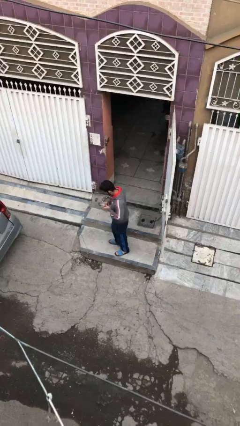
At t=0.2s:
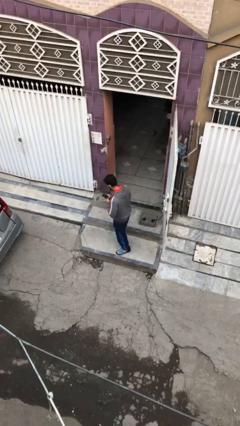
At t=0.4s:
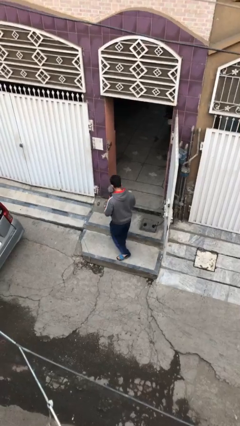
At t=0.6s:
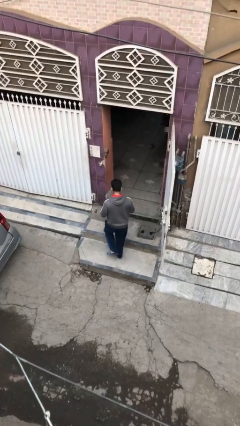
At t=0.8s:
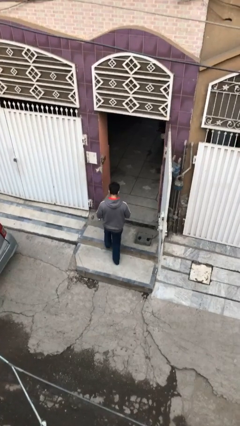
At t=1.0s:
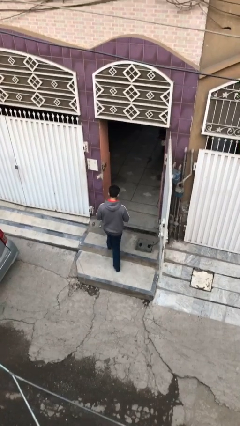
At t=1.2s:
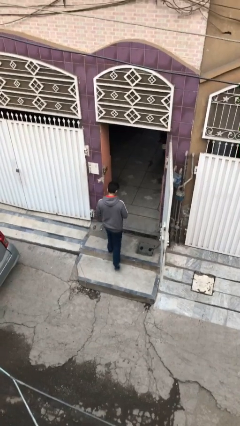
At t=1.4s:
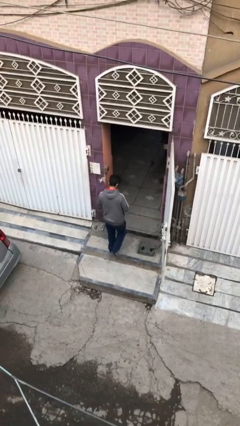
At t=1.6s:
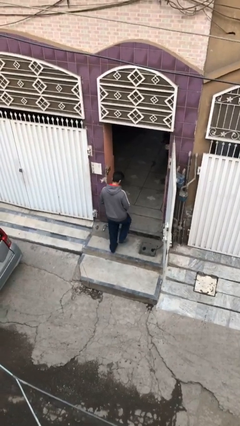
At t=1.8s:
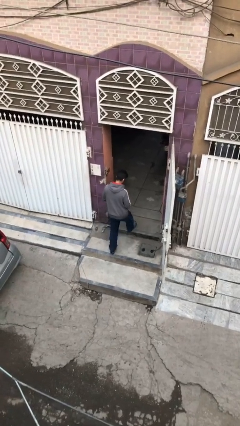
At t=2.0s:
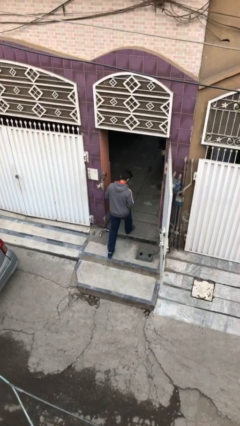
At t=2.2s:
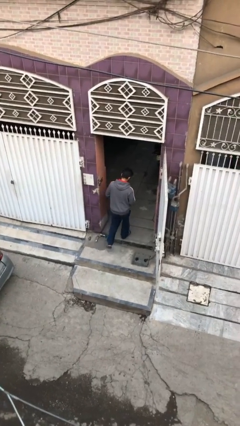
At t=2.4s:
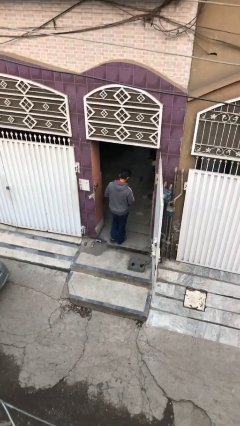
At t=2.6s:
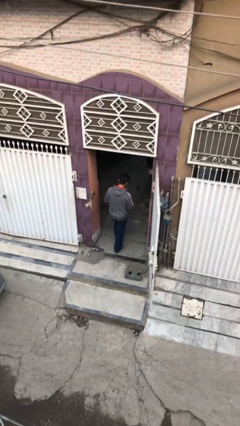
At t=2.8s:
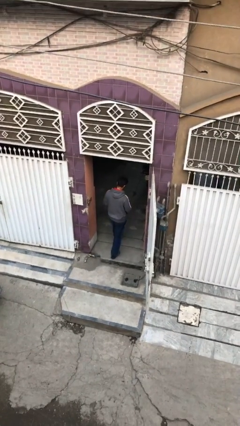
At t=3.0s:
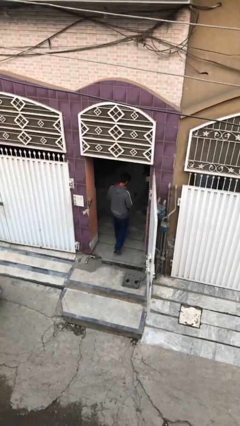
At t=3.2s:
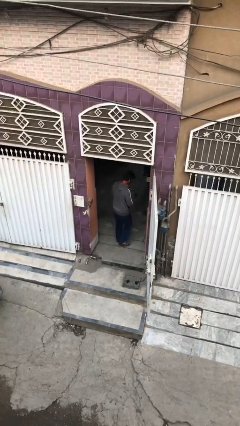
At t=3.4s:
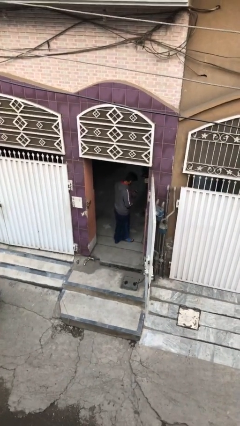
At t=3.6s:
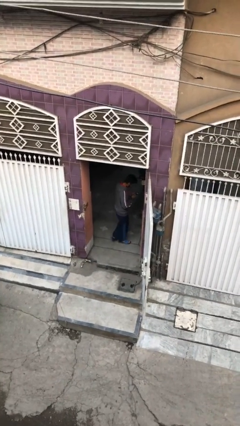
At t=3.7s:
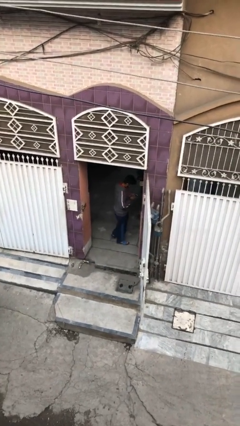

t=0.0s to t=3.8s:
person exits scene through structure

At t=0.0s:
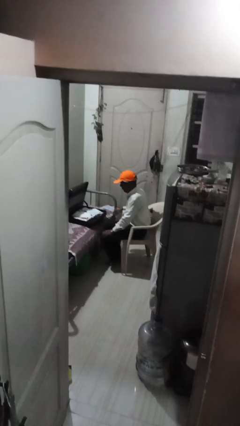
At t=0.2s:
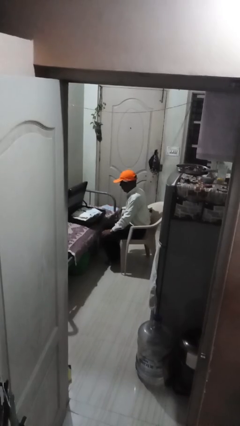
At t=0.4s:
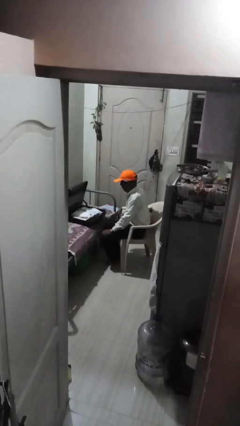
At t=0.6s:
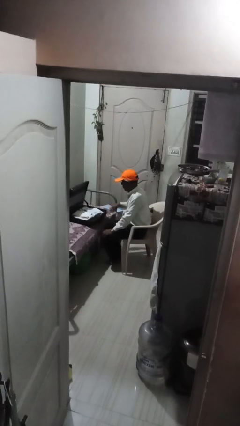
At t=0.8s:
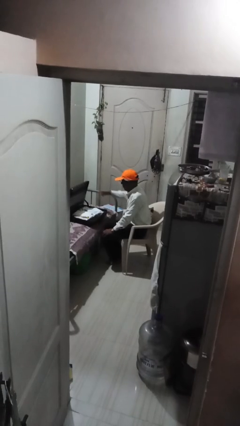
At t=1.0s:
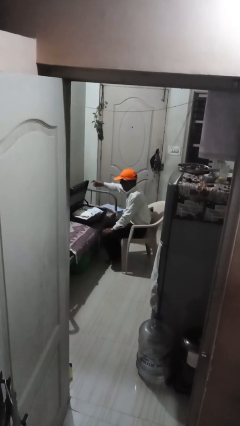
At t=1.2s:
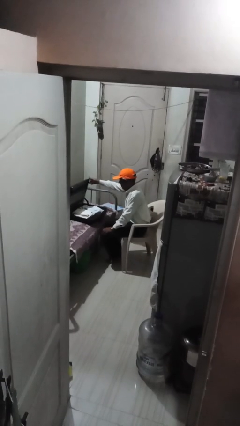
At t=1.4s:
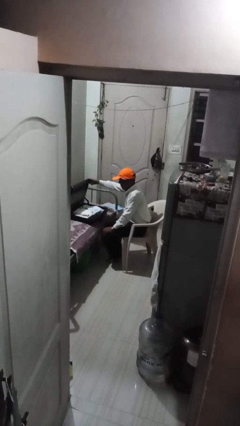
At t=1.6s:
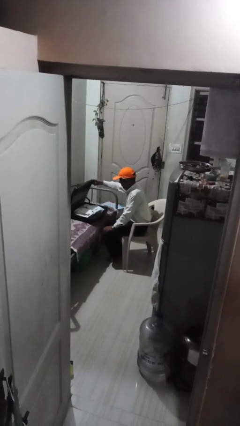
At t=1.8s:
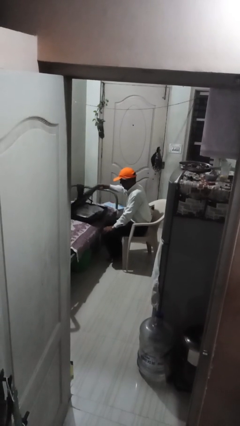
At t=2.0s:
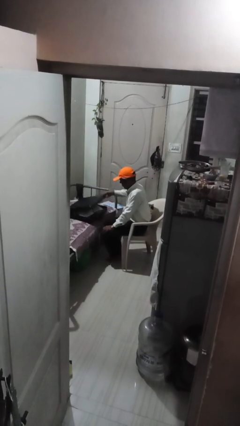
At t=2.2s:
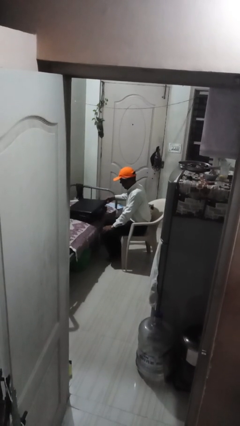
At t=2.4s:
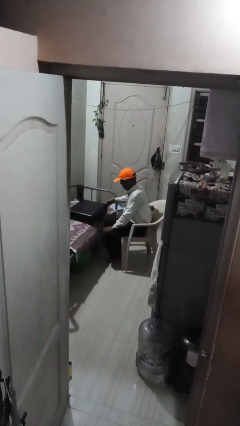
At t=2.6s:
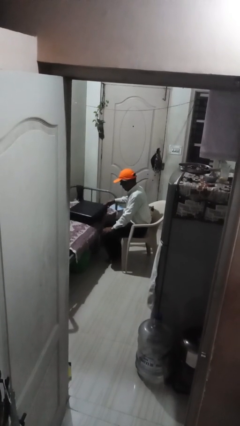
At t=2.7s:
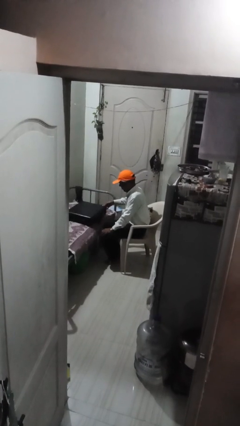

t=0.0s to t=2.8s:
person closes suitcase

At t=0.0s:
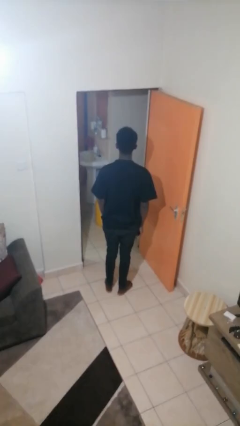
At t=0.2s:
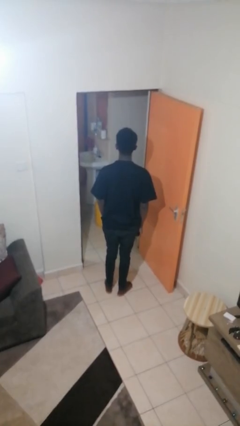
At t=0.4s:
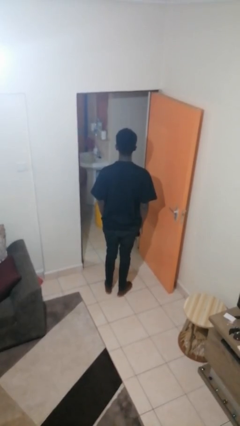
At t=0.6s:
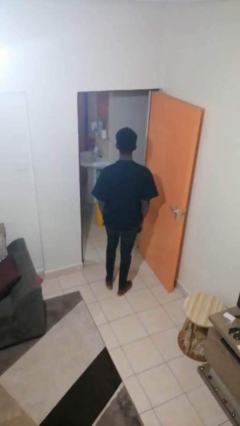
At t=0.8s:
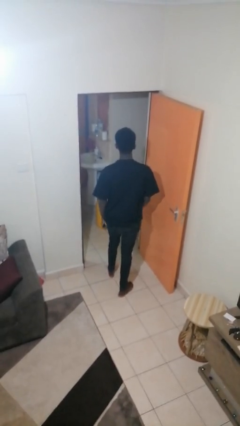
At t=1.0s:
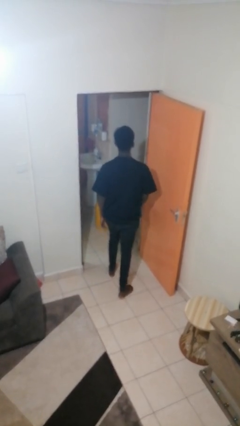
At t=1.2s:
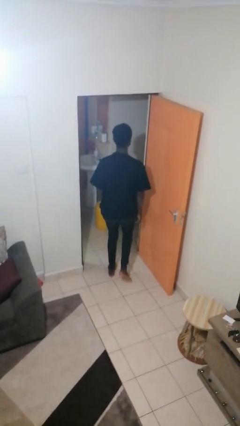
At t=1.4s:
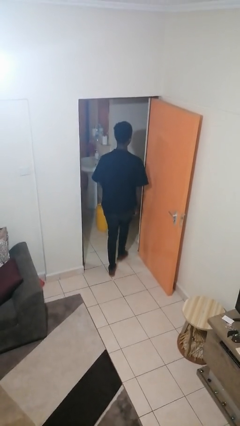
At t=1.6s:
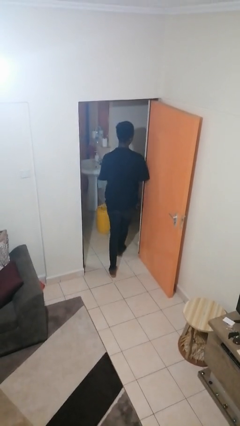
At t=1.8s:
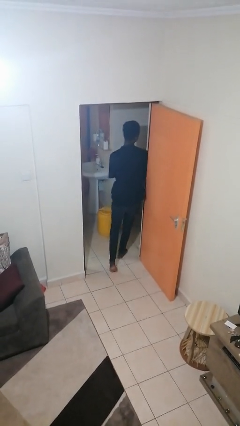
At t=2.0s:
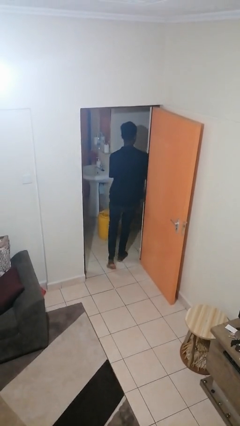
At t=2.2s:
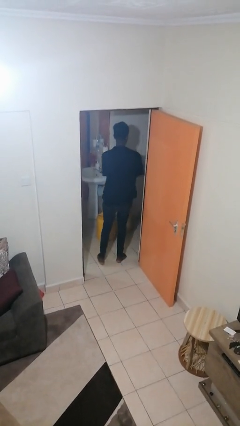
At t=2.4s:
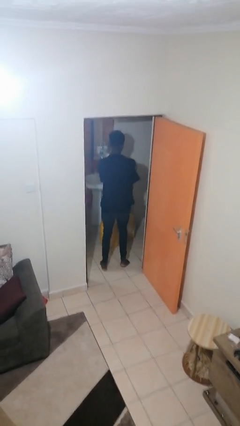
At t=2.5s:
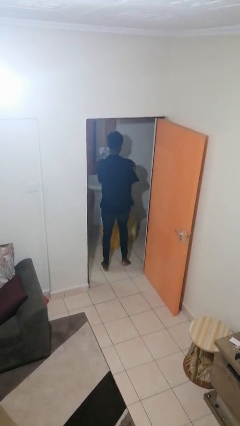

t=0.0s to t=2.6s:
person bumps into wall

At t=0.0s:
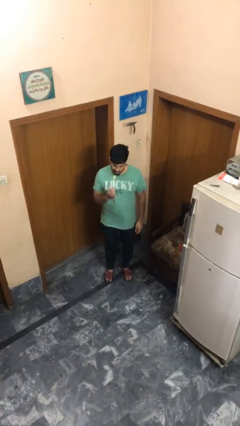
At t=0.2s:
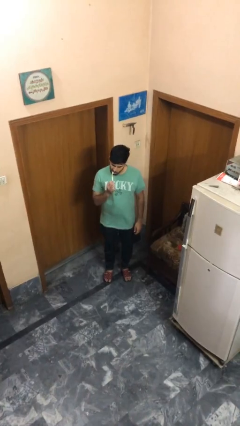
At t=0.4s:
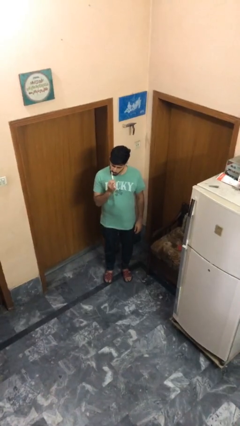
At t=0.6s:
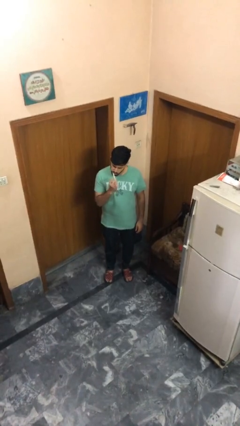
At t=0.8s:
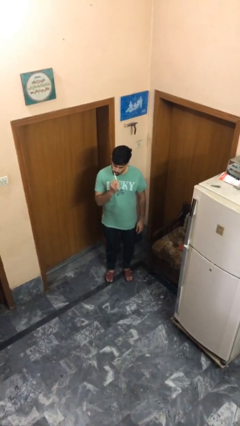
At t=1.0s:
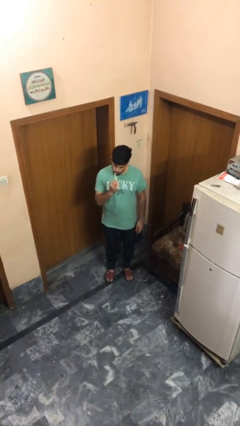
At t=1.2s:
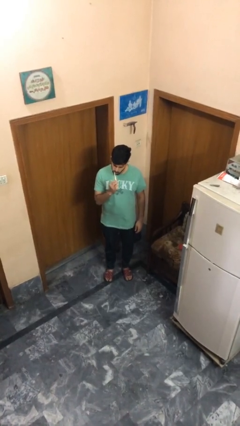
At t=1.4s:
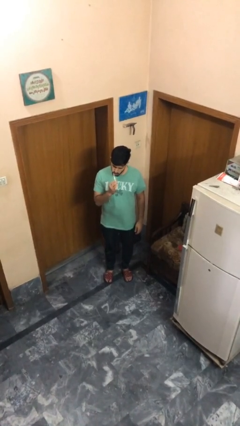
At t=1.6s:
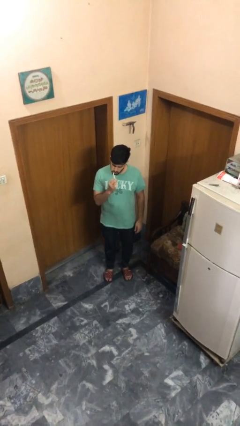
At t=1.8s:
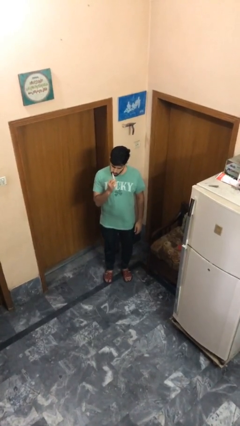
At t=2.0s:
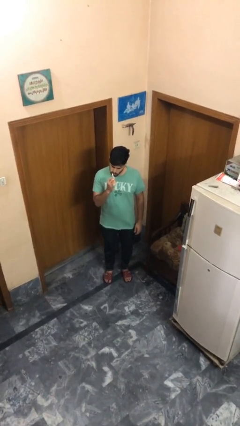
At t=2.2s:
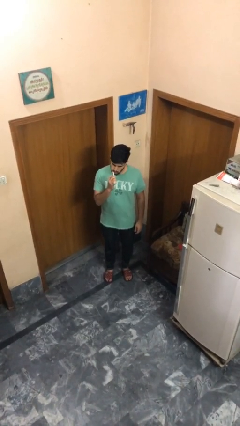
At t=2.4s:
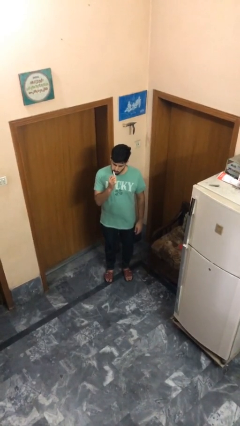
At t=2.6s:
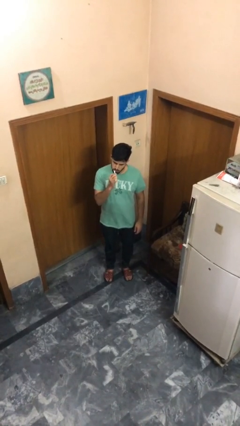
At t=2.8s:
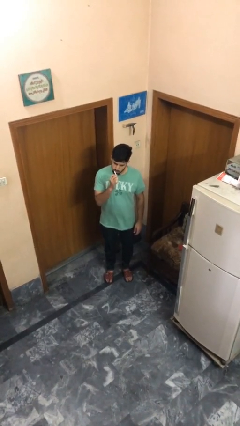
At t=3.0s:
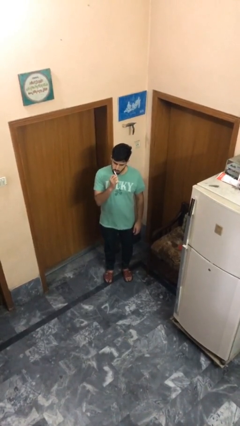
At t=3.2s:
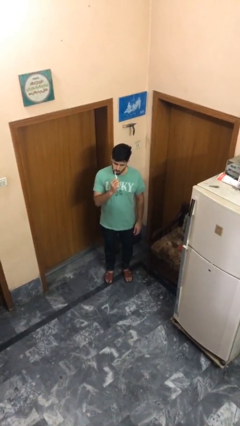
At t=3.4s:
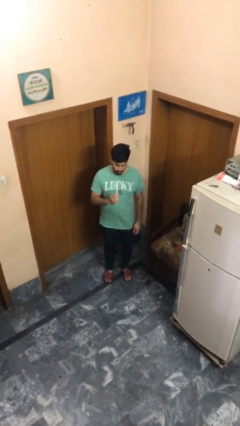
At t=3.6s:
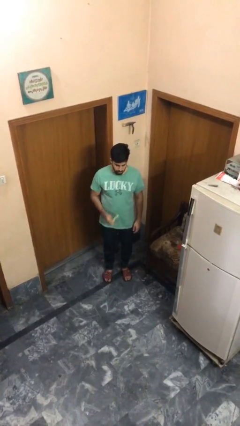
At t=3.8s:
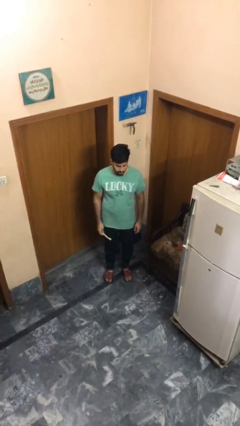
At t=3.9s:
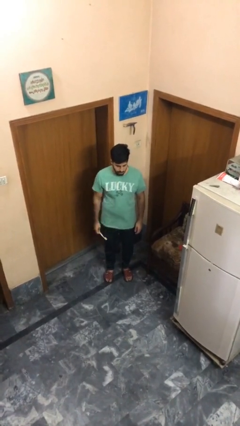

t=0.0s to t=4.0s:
person brushes teeth

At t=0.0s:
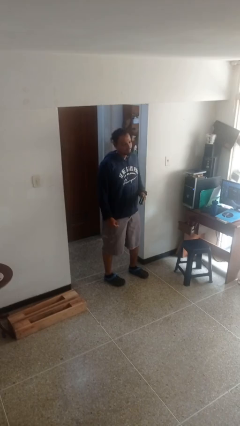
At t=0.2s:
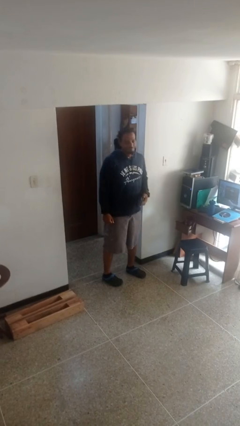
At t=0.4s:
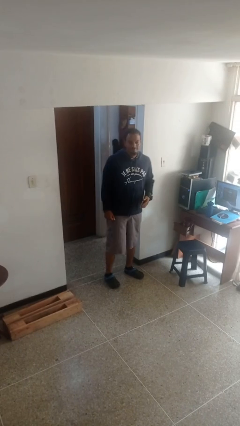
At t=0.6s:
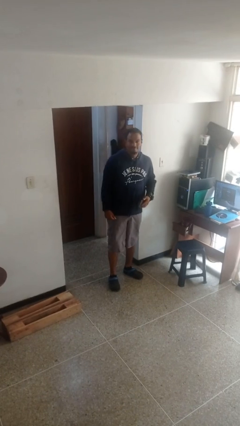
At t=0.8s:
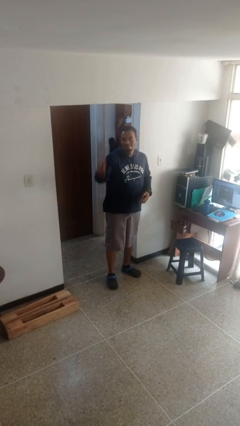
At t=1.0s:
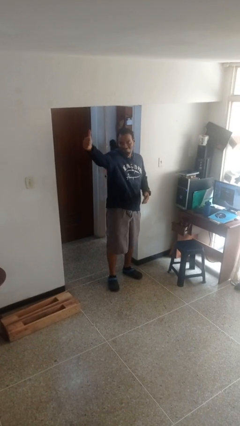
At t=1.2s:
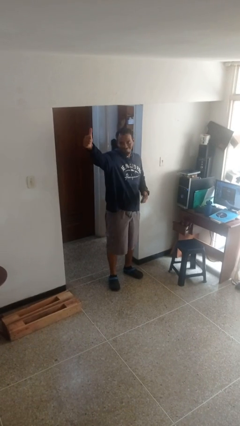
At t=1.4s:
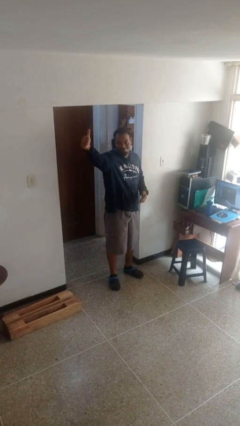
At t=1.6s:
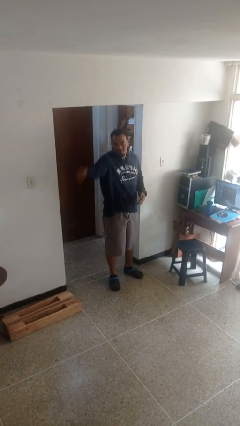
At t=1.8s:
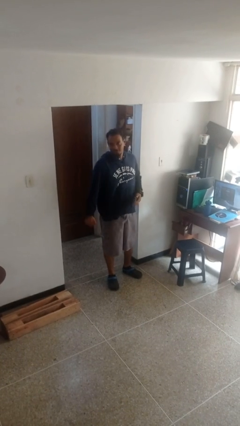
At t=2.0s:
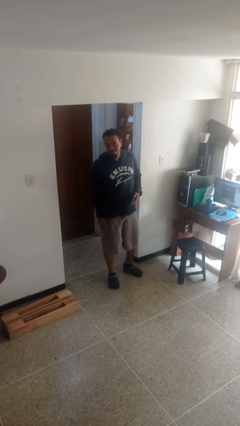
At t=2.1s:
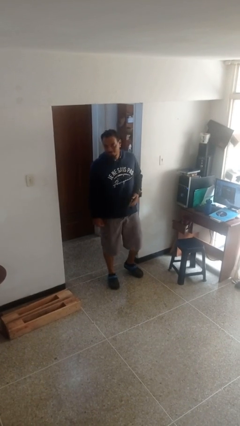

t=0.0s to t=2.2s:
person gestures thumbs up

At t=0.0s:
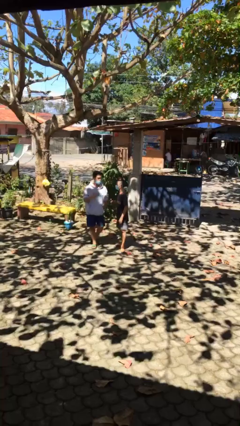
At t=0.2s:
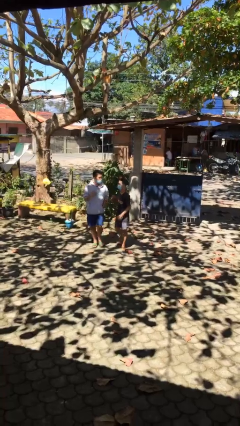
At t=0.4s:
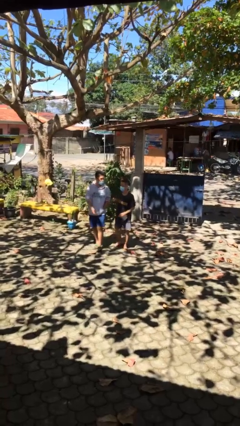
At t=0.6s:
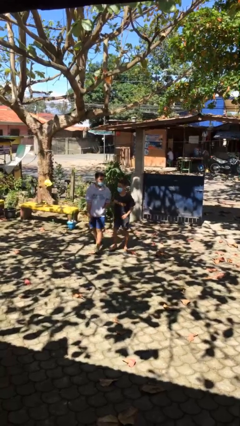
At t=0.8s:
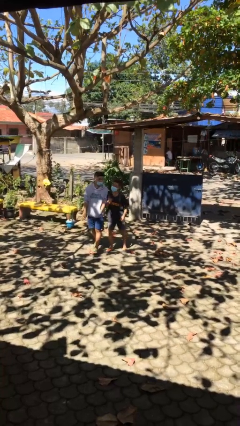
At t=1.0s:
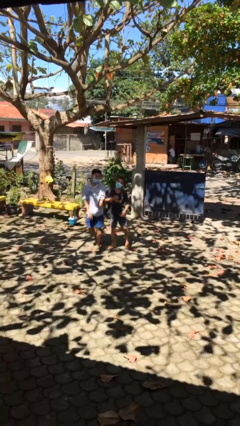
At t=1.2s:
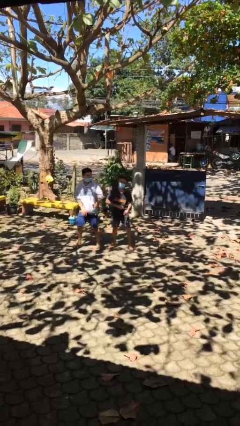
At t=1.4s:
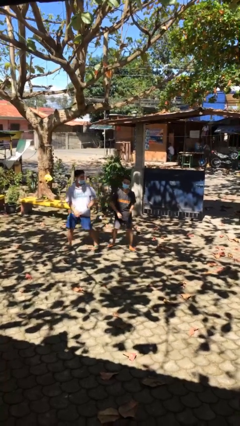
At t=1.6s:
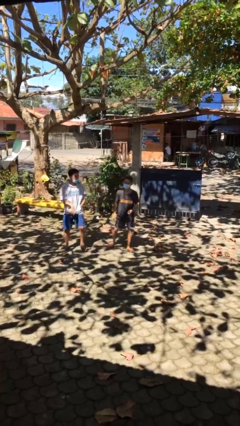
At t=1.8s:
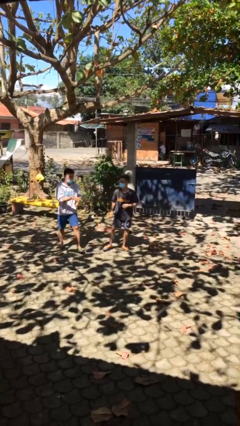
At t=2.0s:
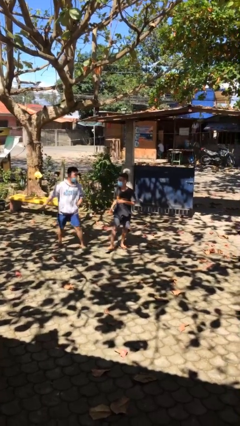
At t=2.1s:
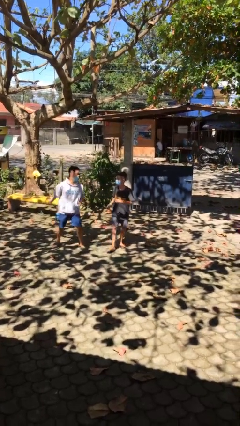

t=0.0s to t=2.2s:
person talks to person
